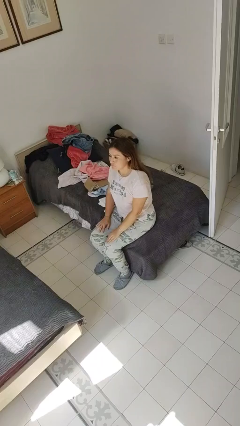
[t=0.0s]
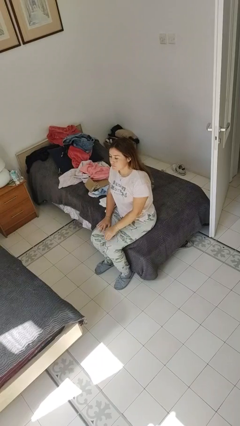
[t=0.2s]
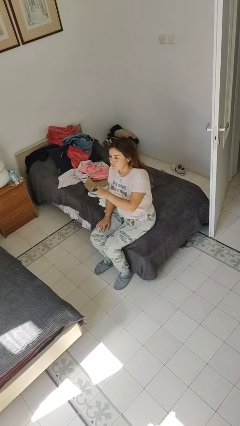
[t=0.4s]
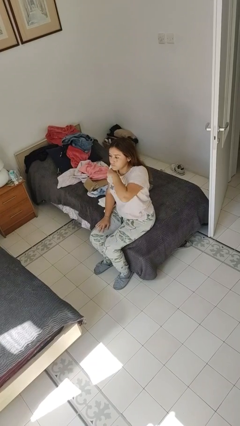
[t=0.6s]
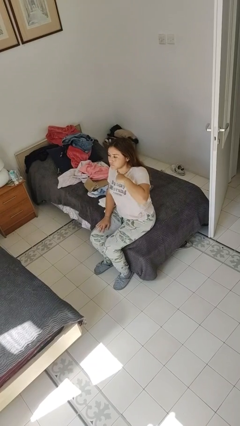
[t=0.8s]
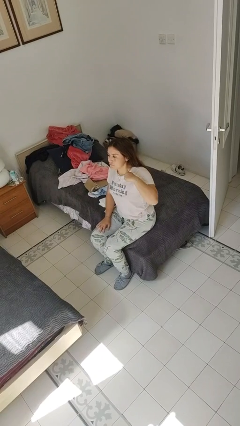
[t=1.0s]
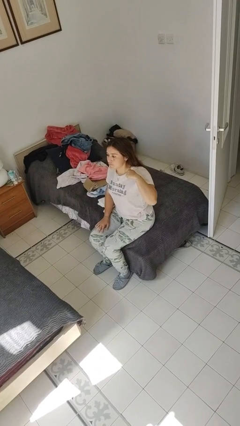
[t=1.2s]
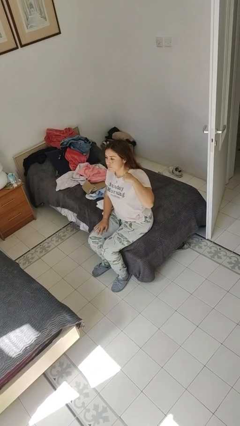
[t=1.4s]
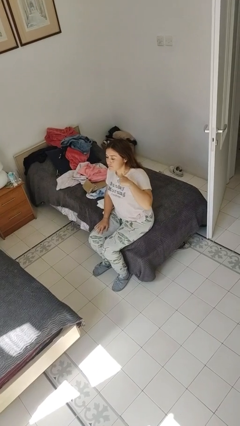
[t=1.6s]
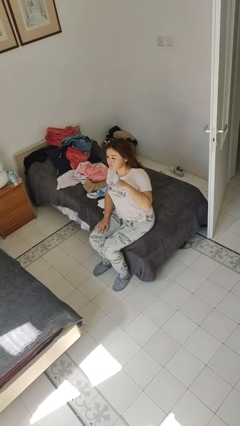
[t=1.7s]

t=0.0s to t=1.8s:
person gestures cut

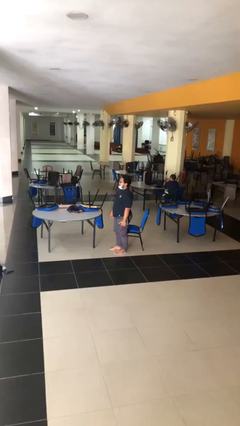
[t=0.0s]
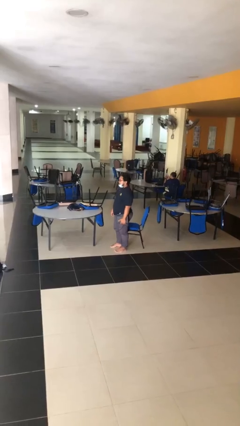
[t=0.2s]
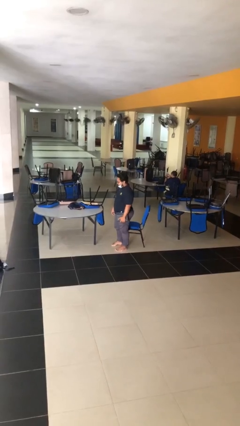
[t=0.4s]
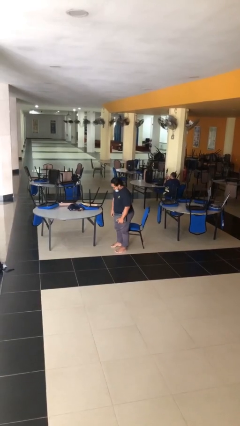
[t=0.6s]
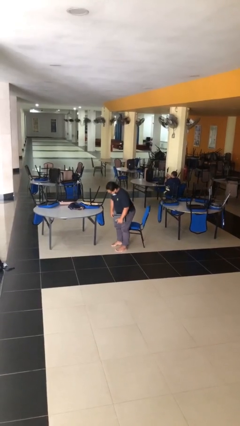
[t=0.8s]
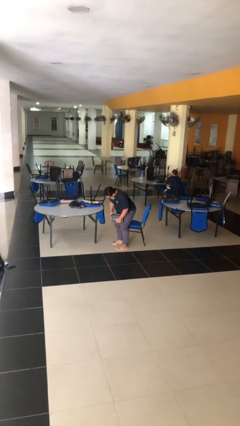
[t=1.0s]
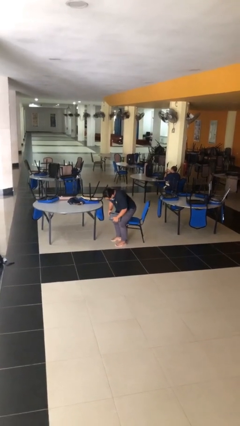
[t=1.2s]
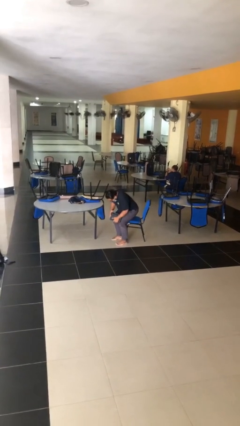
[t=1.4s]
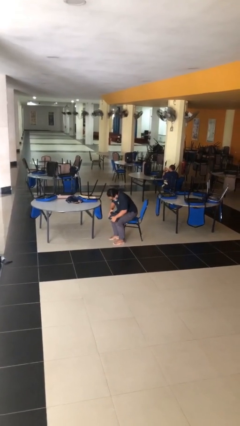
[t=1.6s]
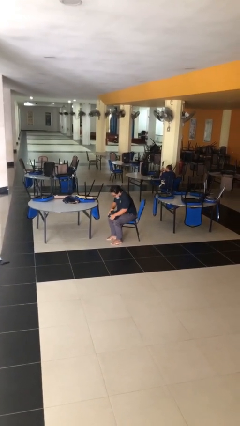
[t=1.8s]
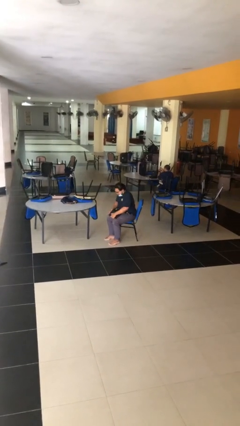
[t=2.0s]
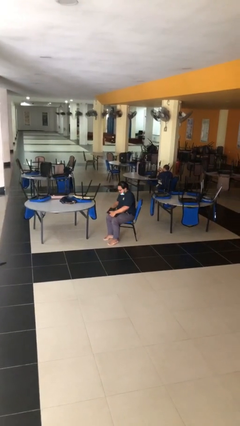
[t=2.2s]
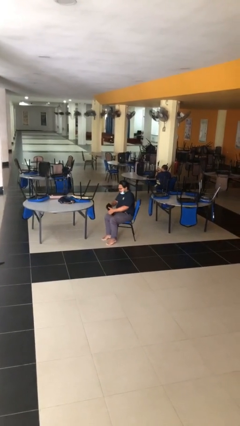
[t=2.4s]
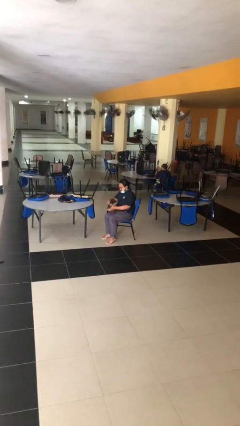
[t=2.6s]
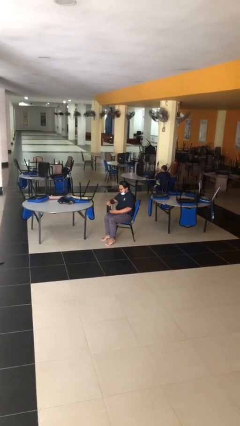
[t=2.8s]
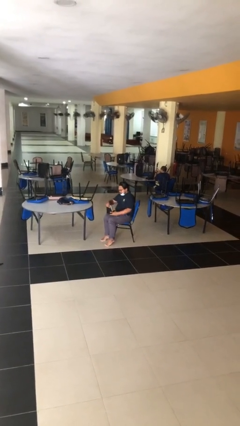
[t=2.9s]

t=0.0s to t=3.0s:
person sits down

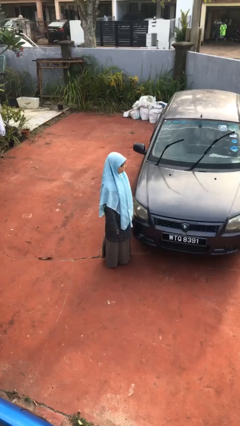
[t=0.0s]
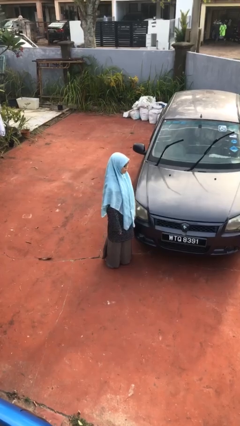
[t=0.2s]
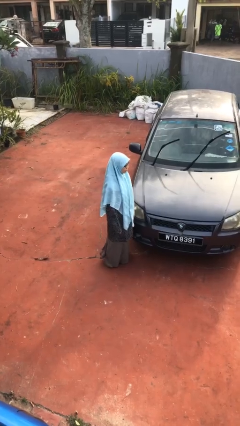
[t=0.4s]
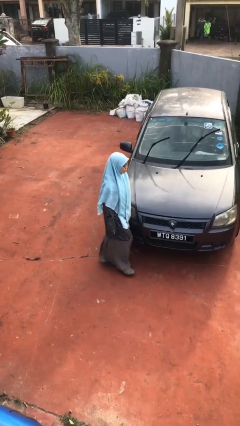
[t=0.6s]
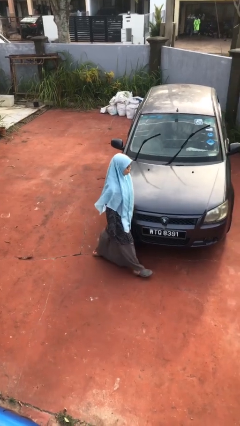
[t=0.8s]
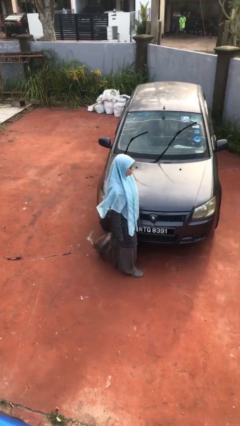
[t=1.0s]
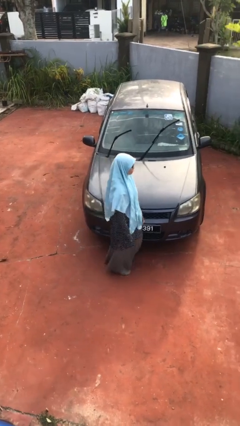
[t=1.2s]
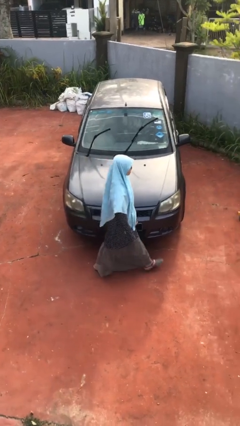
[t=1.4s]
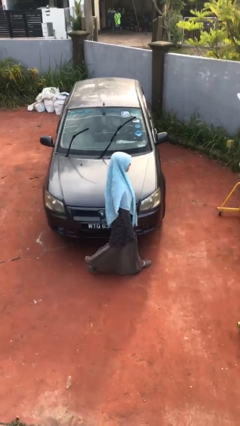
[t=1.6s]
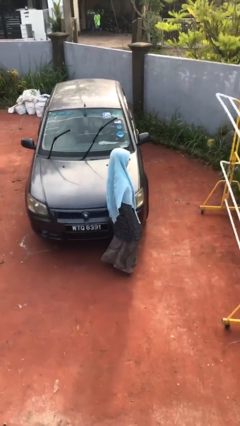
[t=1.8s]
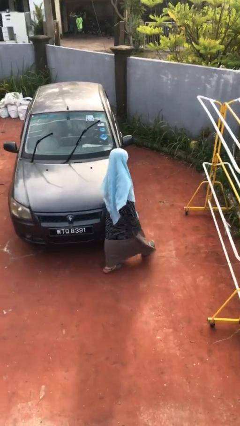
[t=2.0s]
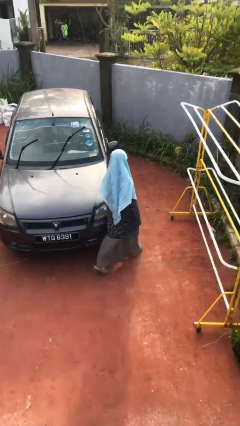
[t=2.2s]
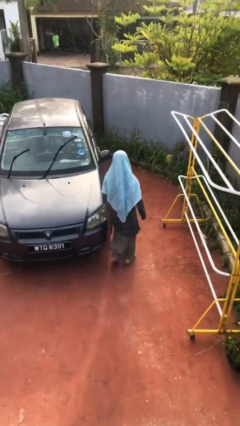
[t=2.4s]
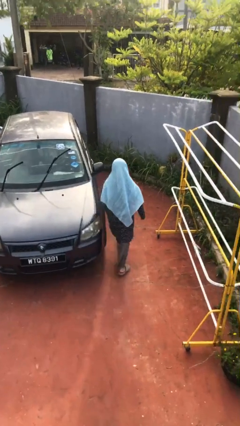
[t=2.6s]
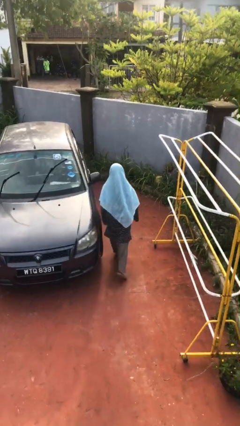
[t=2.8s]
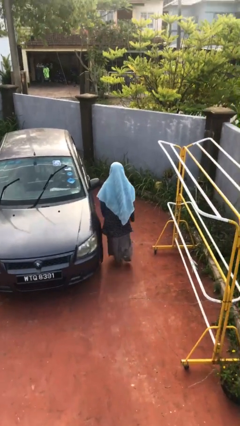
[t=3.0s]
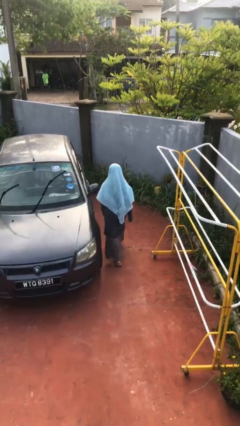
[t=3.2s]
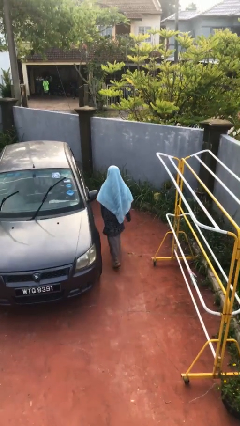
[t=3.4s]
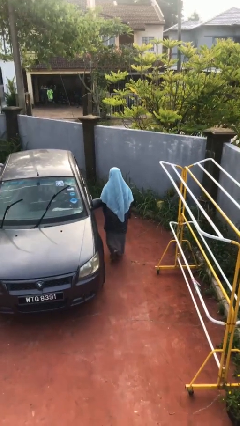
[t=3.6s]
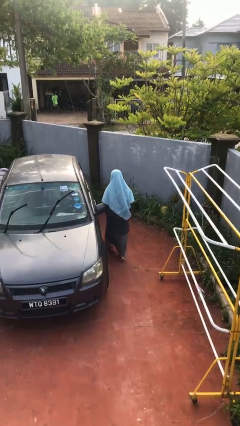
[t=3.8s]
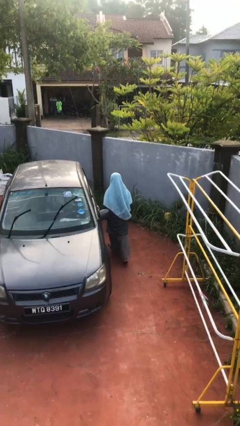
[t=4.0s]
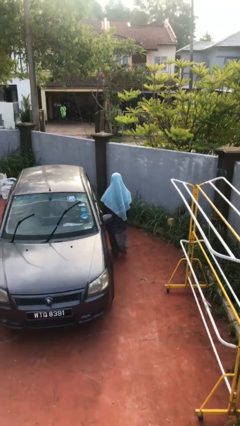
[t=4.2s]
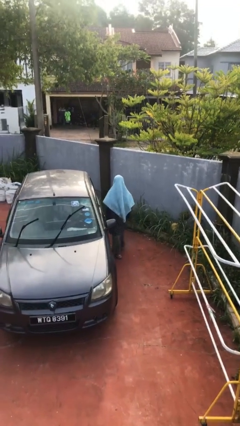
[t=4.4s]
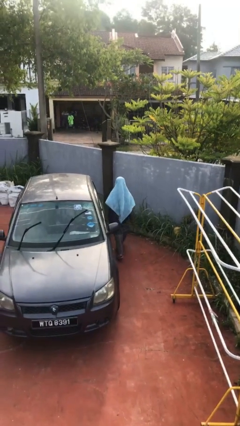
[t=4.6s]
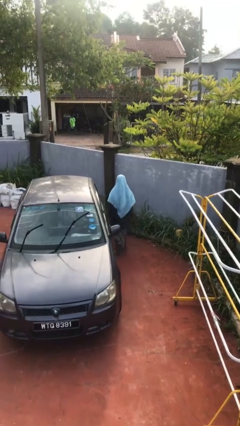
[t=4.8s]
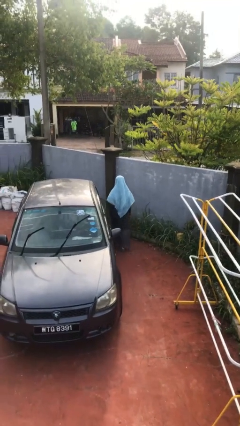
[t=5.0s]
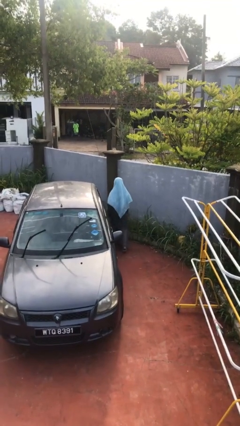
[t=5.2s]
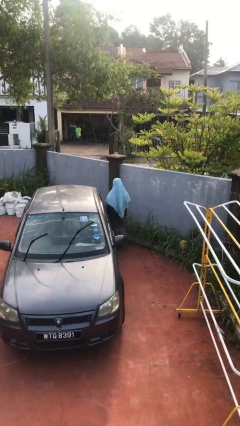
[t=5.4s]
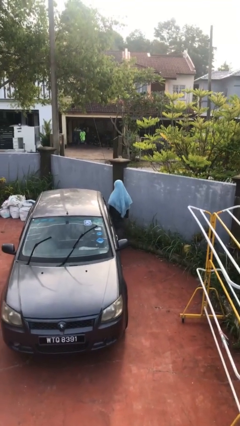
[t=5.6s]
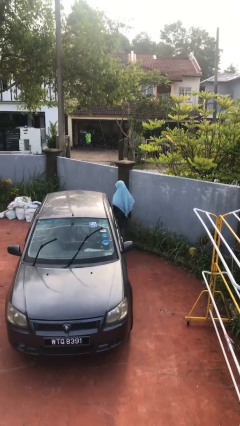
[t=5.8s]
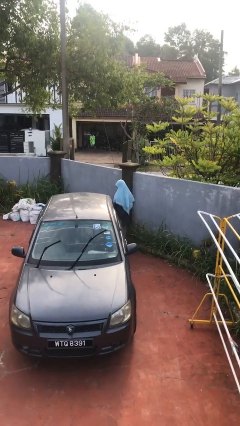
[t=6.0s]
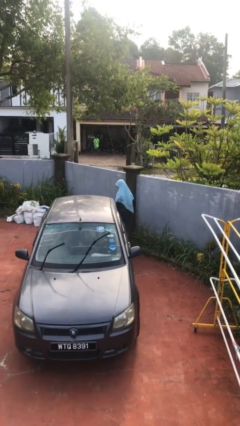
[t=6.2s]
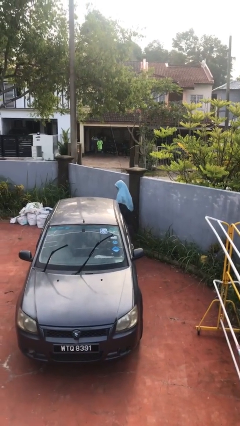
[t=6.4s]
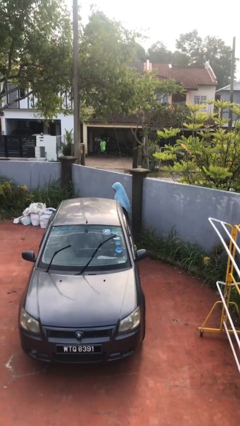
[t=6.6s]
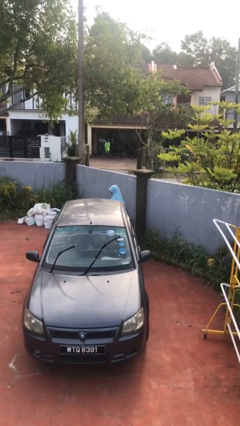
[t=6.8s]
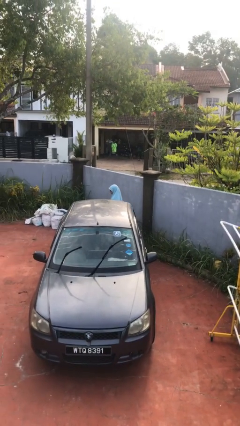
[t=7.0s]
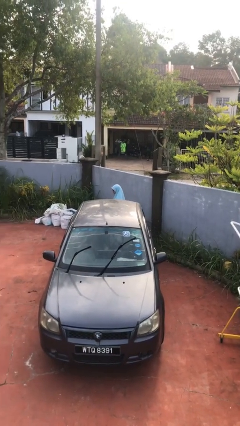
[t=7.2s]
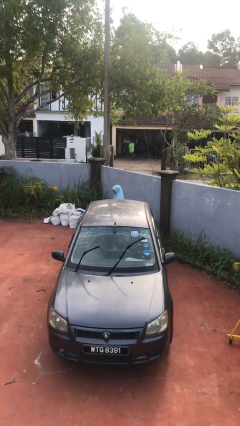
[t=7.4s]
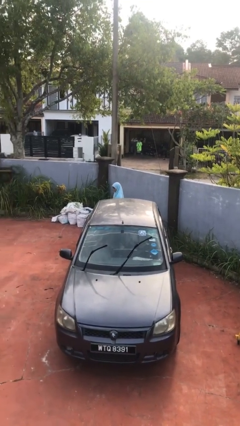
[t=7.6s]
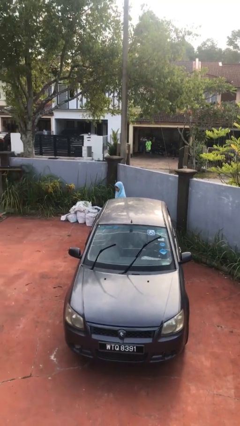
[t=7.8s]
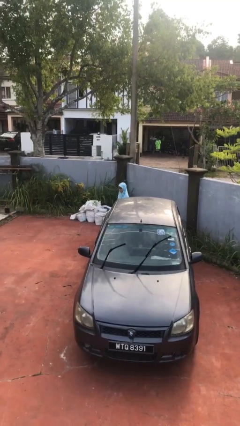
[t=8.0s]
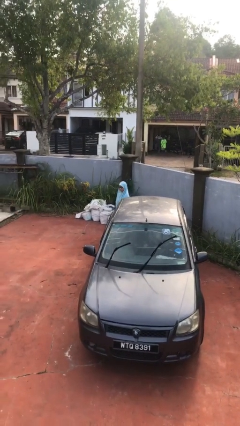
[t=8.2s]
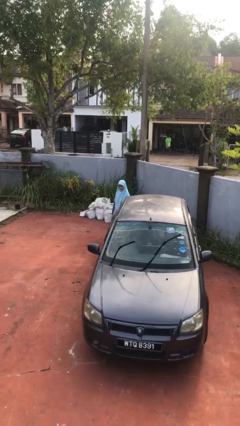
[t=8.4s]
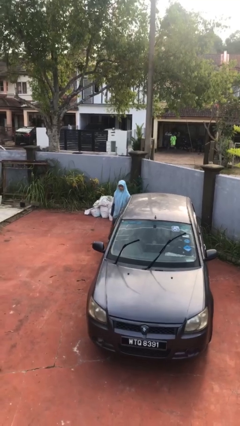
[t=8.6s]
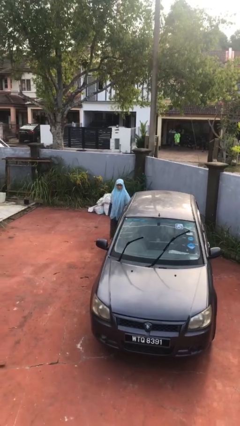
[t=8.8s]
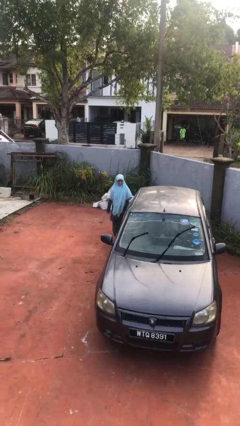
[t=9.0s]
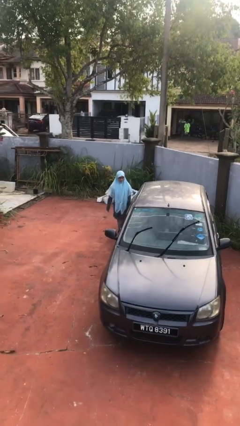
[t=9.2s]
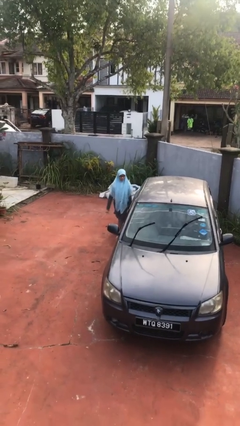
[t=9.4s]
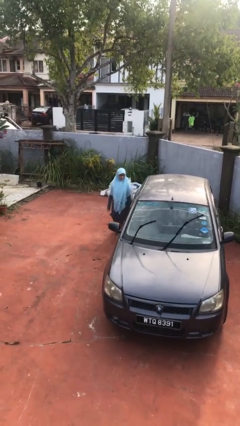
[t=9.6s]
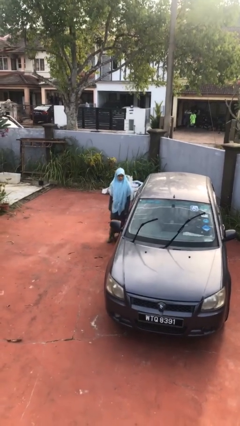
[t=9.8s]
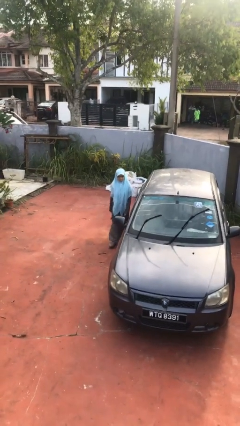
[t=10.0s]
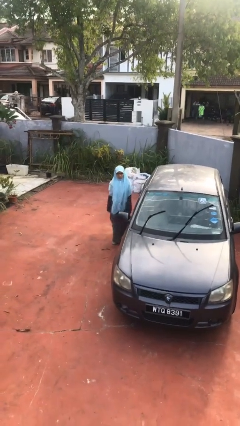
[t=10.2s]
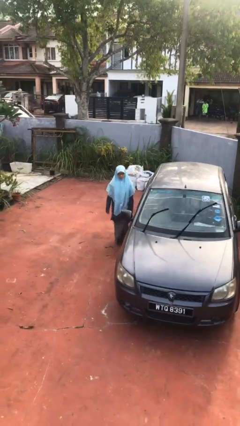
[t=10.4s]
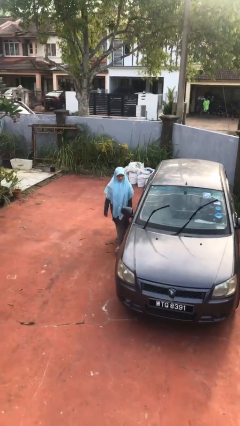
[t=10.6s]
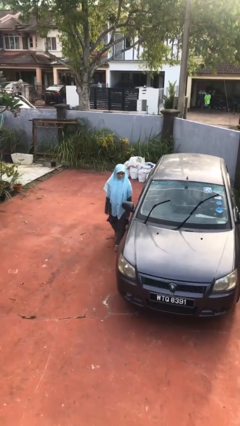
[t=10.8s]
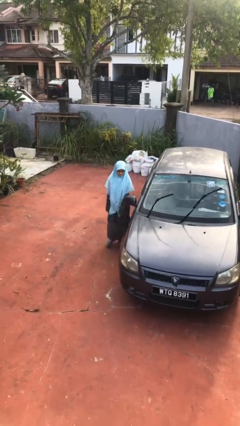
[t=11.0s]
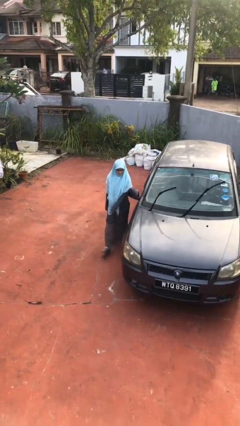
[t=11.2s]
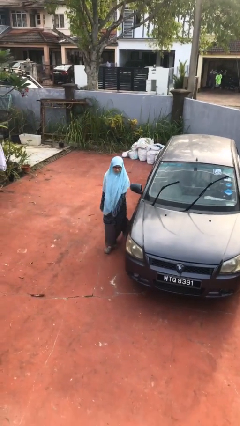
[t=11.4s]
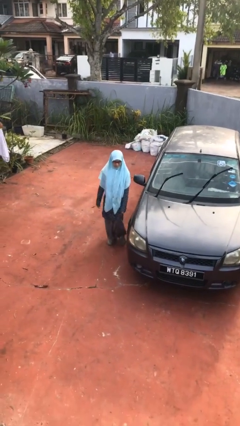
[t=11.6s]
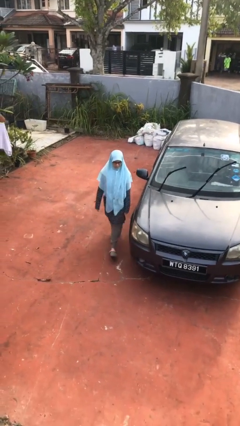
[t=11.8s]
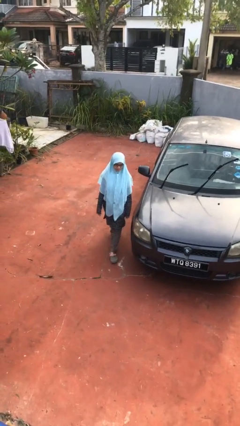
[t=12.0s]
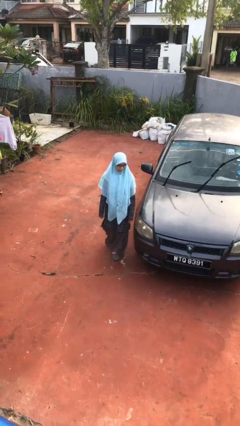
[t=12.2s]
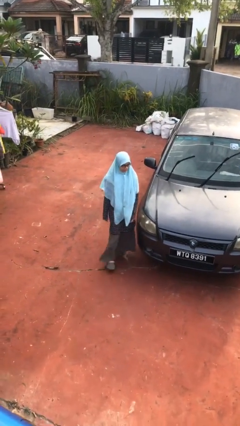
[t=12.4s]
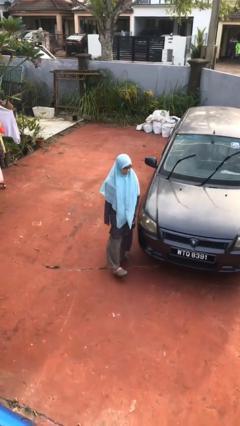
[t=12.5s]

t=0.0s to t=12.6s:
person walks around car
